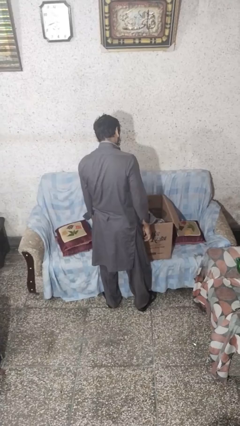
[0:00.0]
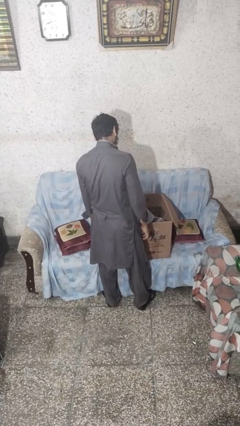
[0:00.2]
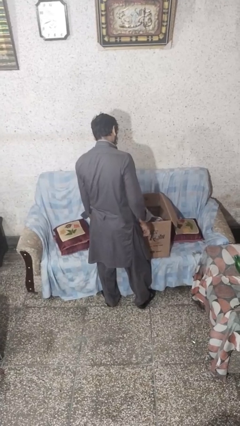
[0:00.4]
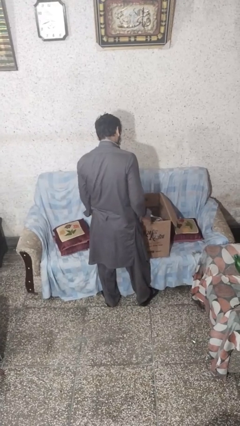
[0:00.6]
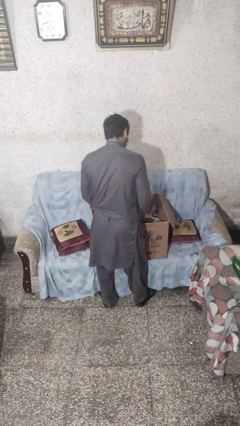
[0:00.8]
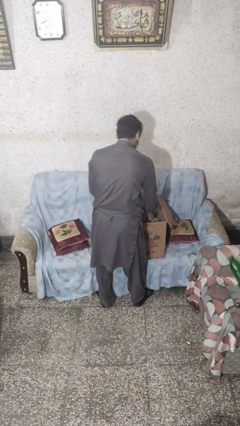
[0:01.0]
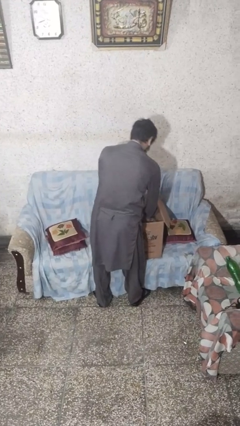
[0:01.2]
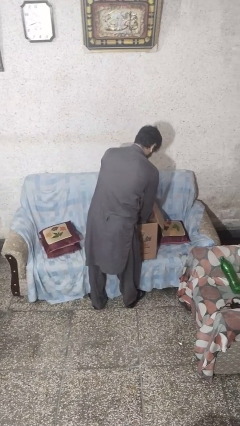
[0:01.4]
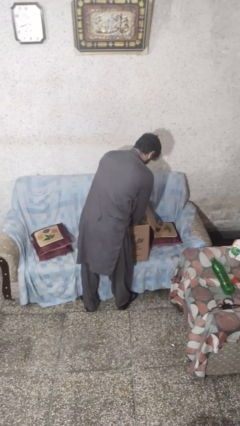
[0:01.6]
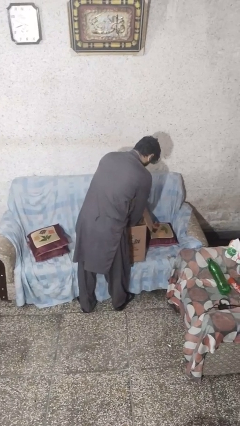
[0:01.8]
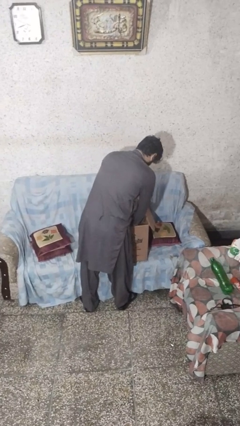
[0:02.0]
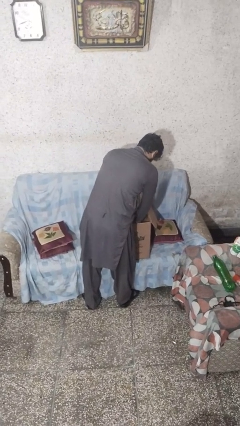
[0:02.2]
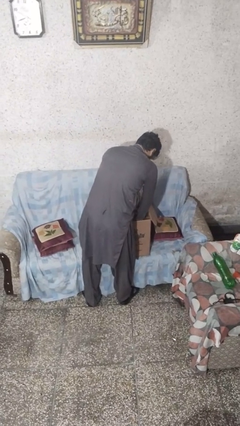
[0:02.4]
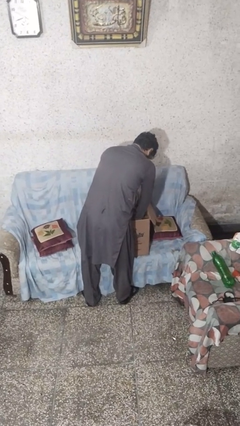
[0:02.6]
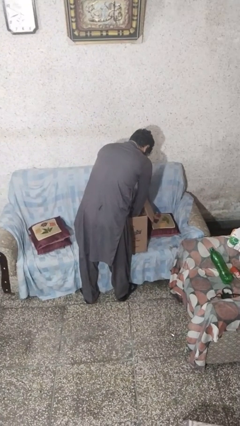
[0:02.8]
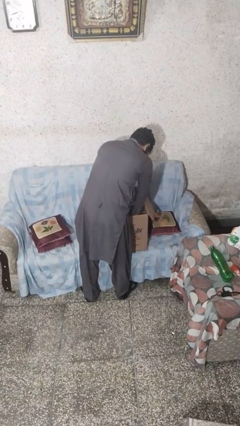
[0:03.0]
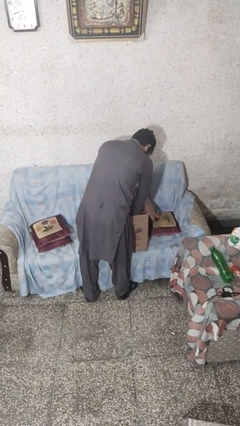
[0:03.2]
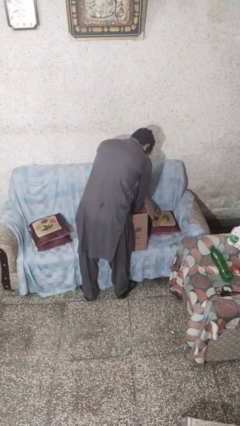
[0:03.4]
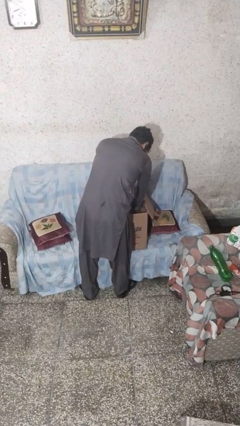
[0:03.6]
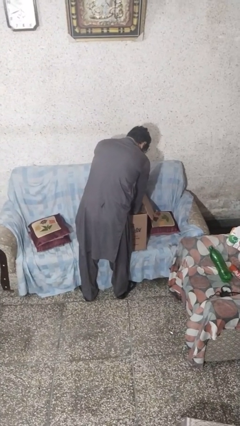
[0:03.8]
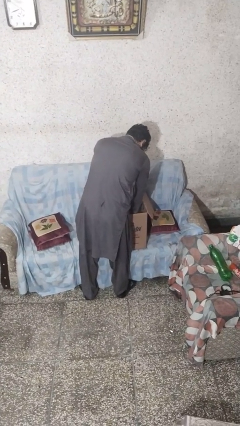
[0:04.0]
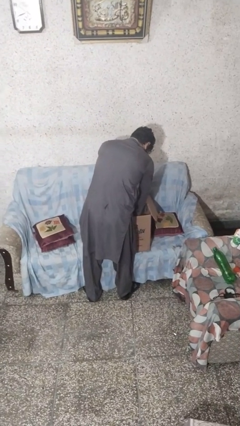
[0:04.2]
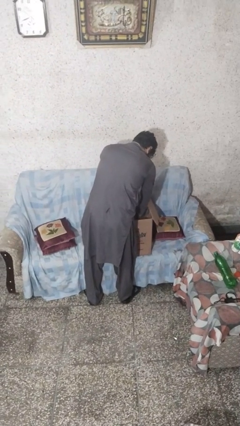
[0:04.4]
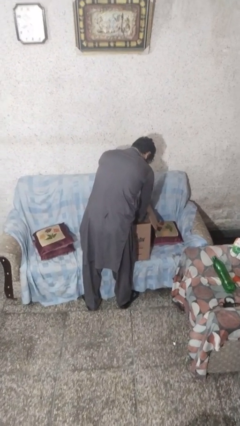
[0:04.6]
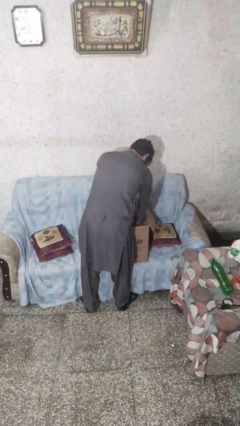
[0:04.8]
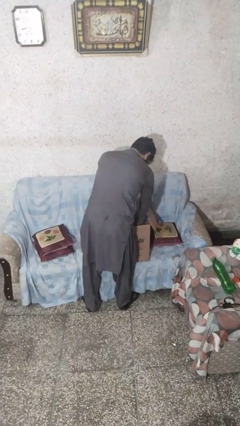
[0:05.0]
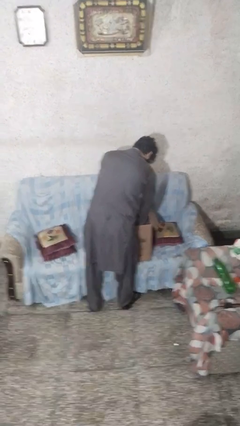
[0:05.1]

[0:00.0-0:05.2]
person searches in box

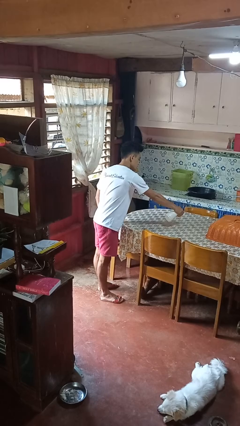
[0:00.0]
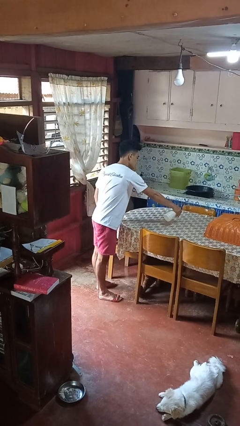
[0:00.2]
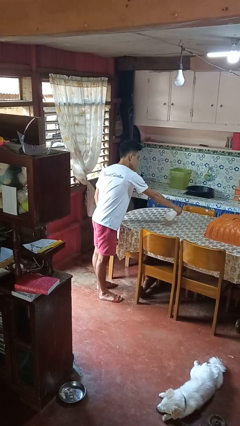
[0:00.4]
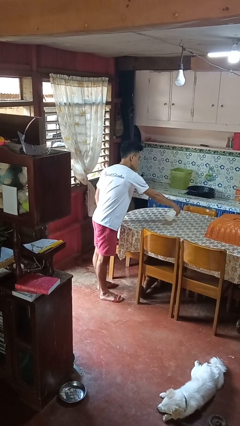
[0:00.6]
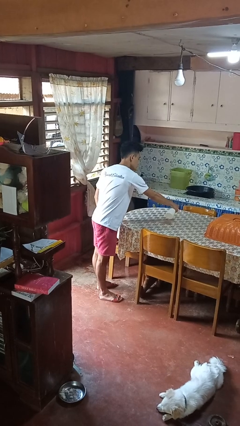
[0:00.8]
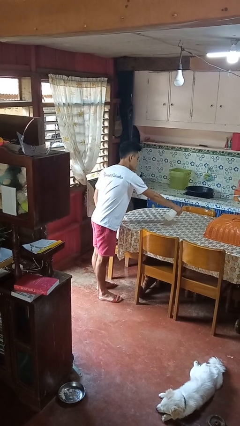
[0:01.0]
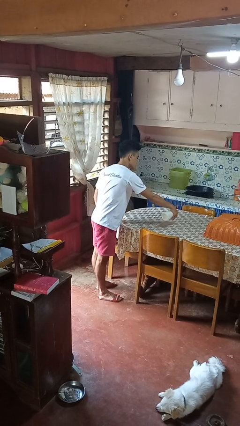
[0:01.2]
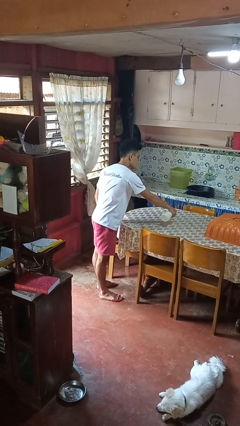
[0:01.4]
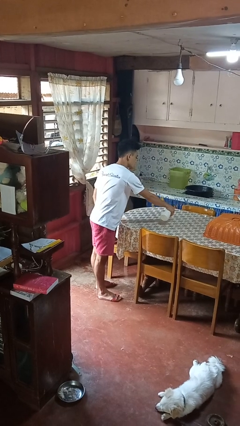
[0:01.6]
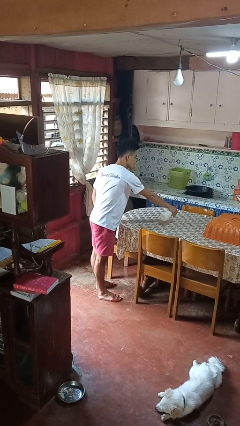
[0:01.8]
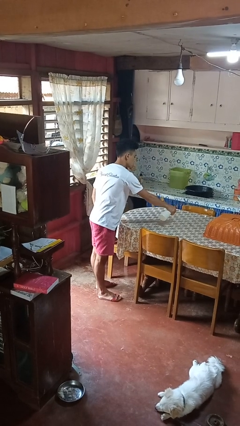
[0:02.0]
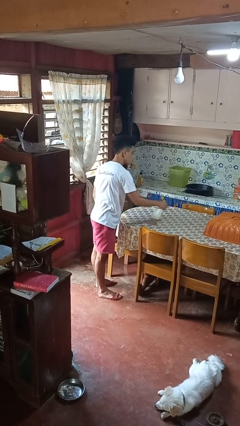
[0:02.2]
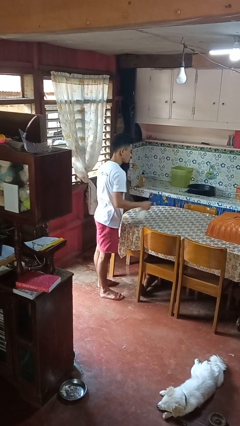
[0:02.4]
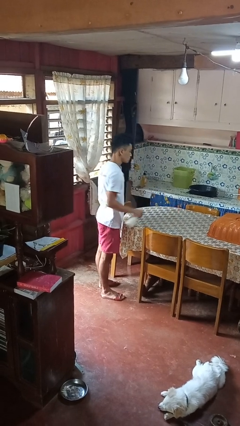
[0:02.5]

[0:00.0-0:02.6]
person sprays from bottle

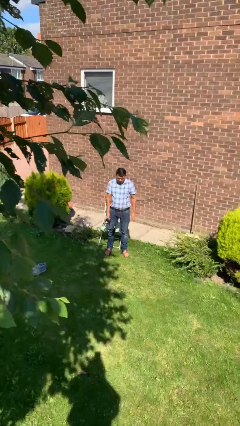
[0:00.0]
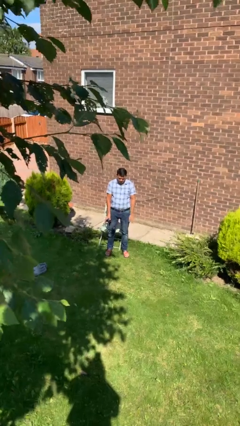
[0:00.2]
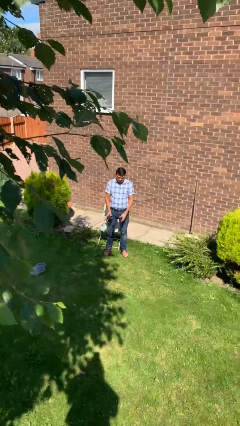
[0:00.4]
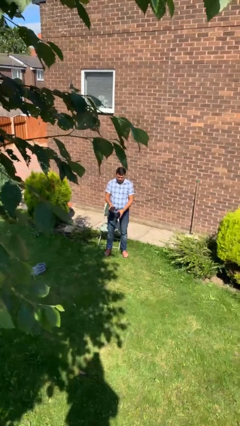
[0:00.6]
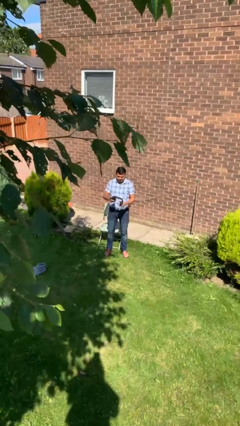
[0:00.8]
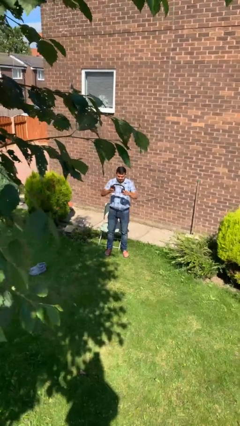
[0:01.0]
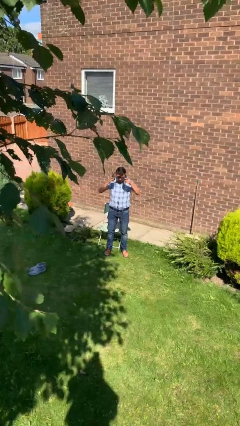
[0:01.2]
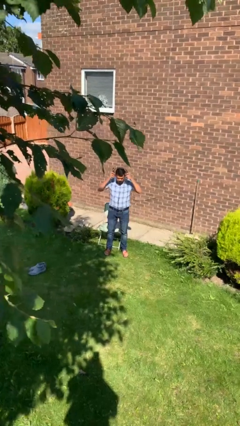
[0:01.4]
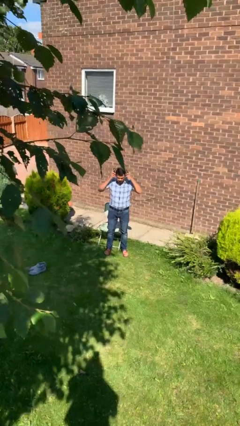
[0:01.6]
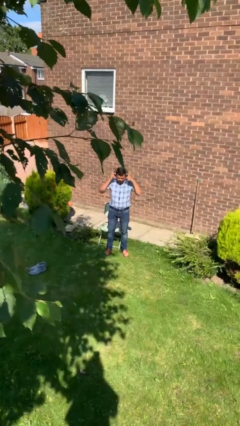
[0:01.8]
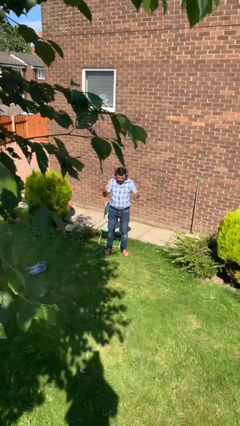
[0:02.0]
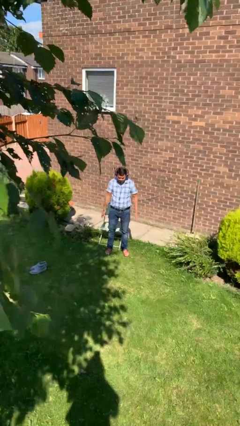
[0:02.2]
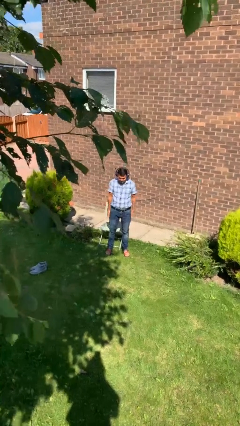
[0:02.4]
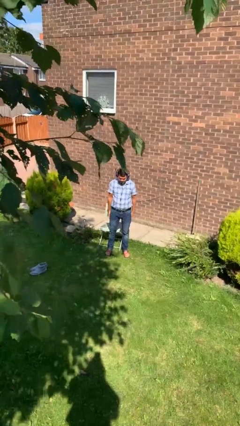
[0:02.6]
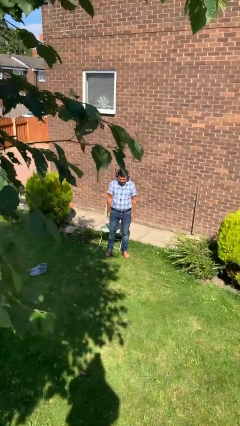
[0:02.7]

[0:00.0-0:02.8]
person puts on headphones

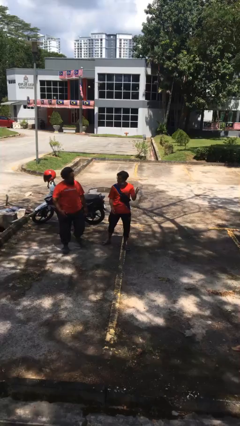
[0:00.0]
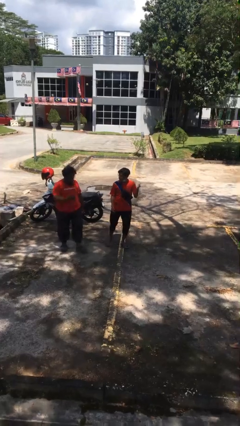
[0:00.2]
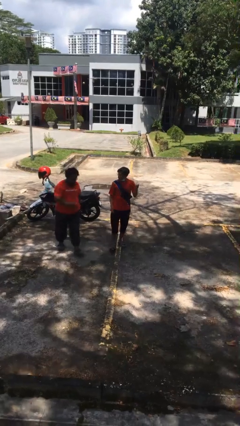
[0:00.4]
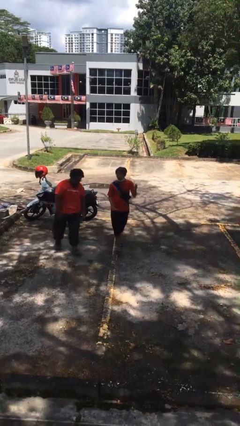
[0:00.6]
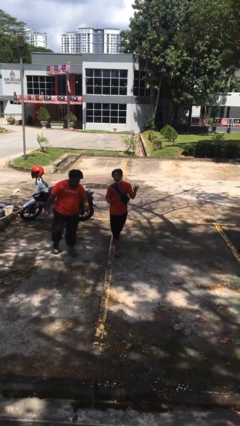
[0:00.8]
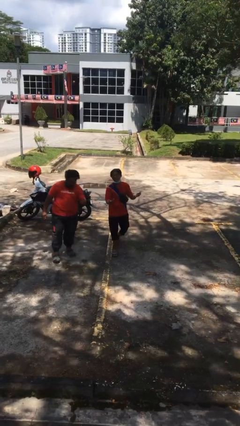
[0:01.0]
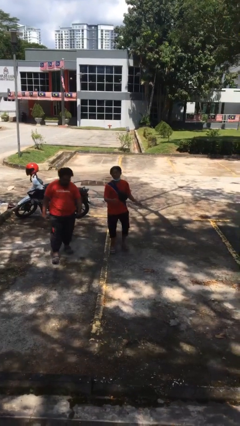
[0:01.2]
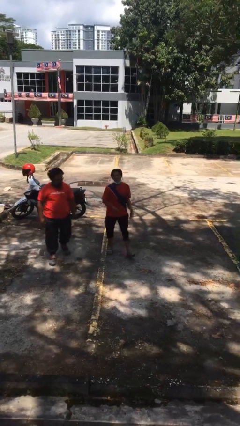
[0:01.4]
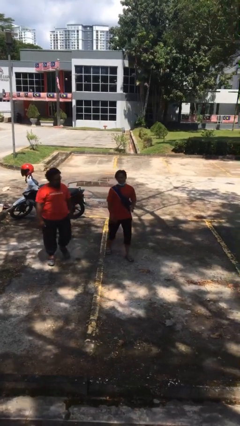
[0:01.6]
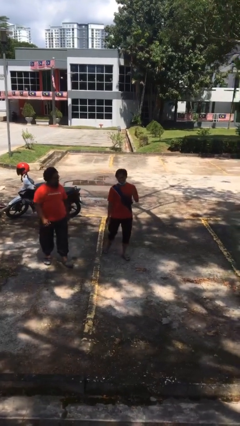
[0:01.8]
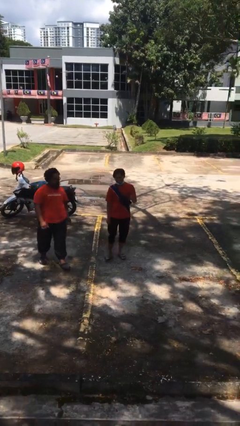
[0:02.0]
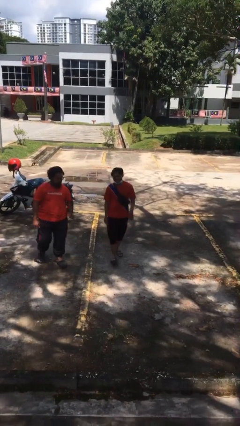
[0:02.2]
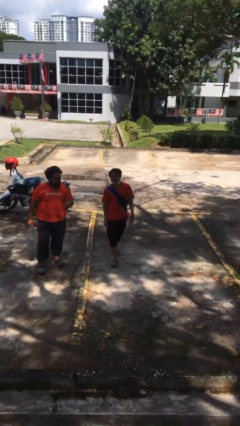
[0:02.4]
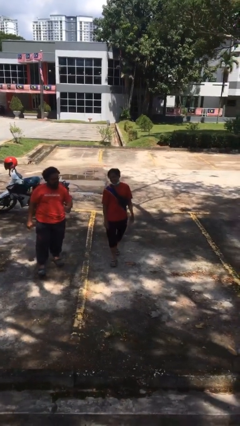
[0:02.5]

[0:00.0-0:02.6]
person talks to person

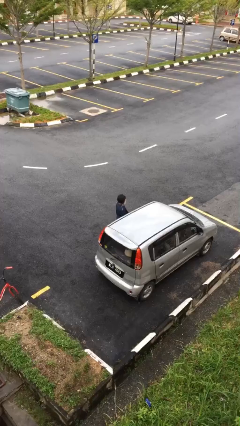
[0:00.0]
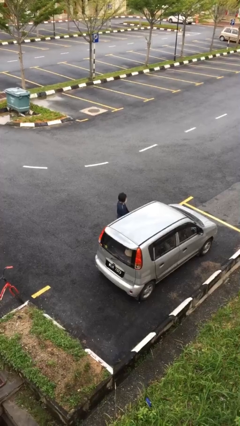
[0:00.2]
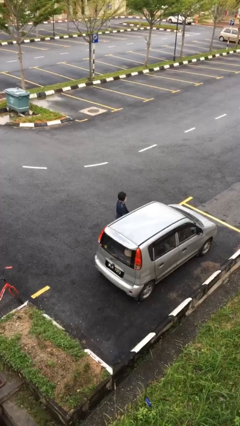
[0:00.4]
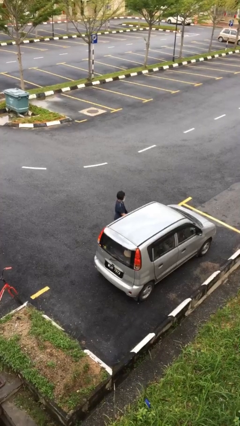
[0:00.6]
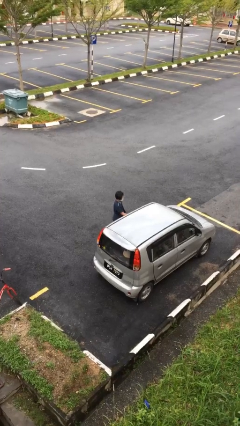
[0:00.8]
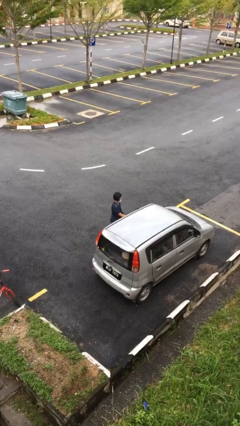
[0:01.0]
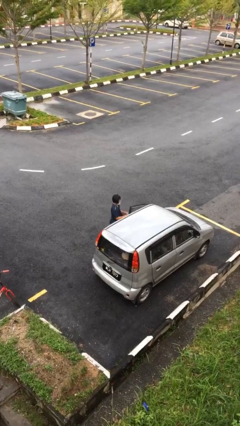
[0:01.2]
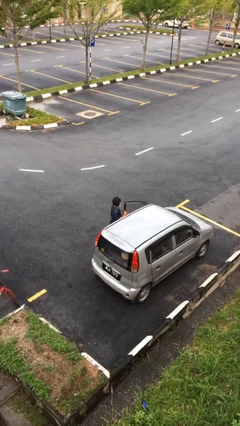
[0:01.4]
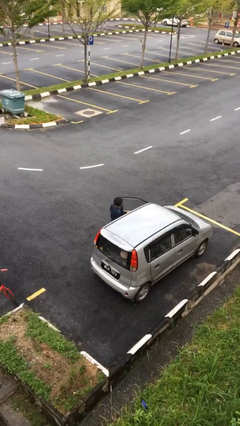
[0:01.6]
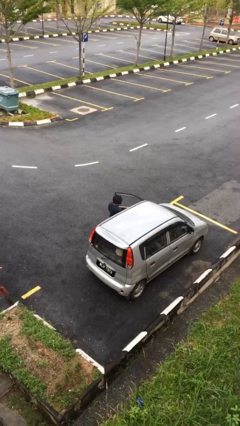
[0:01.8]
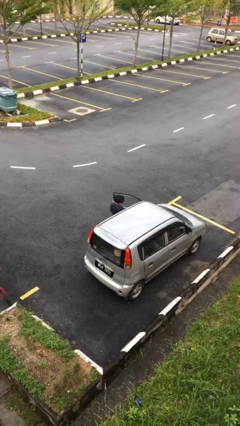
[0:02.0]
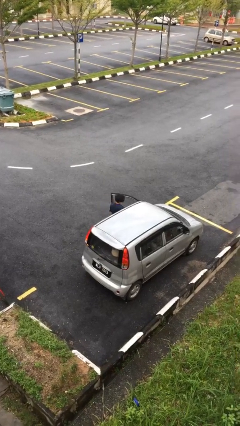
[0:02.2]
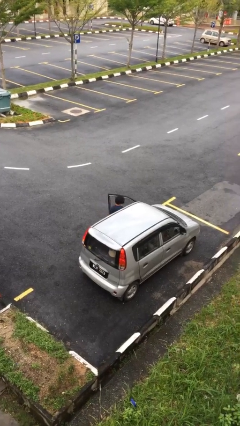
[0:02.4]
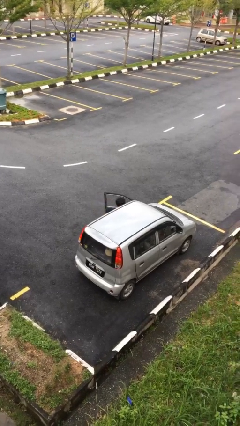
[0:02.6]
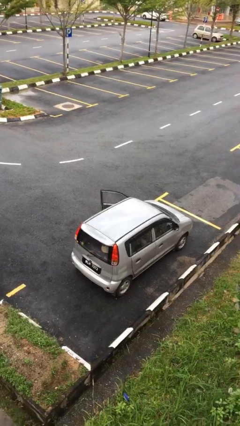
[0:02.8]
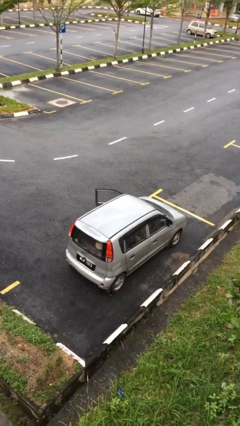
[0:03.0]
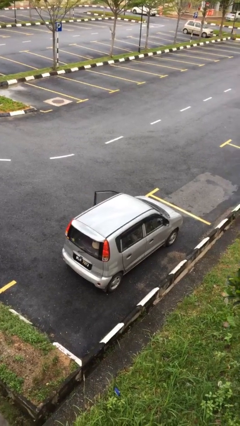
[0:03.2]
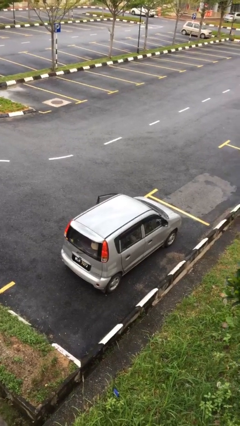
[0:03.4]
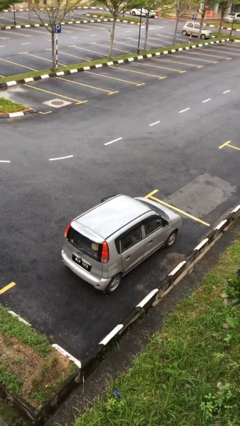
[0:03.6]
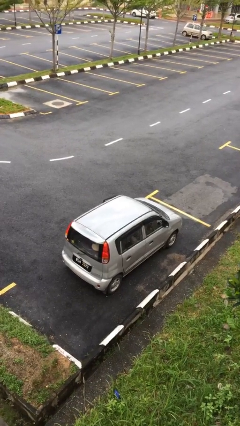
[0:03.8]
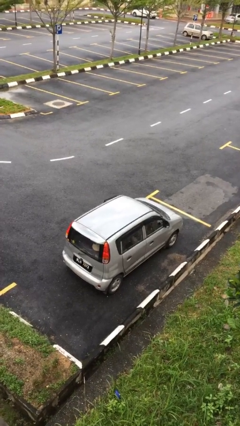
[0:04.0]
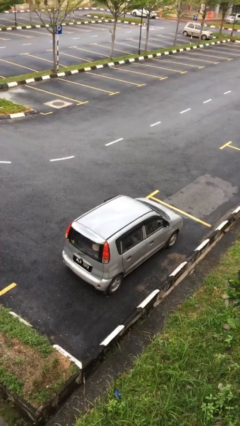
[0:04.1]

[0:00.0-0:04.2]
person enters car

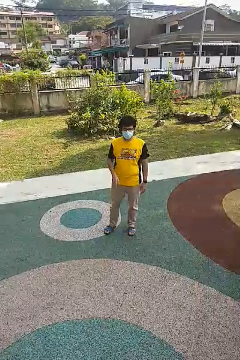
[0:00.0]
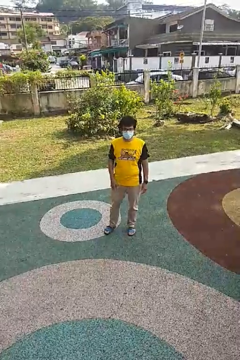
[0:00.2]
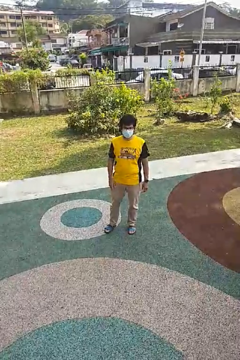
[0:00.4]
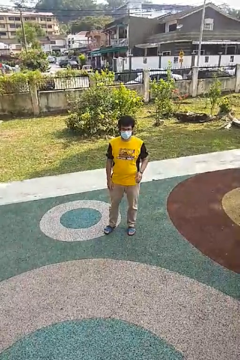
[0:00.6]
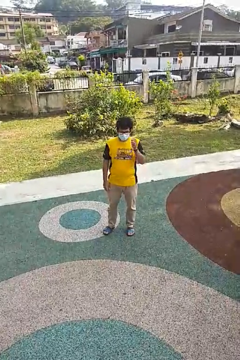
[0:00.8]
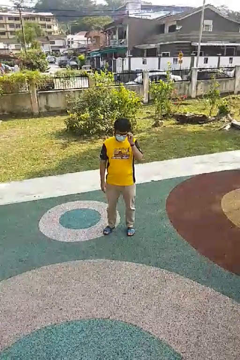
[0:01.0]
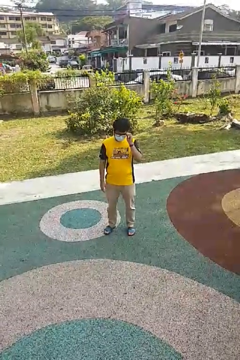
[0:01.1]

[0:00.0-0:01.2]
person puts on glasses
